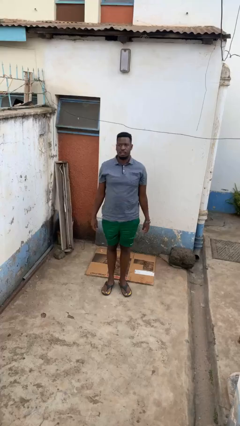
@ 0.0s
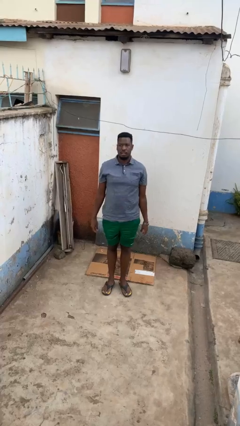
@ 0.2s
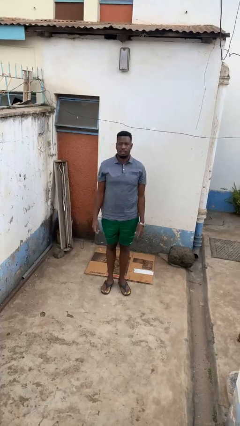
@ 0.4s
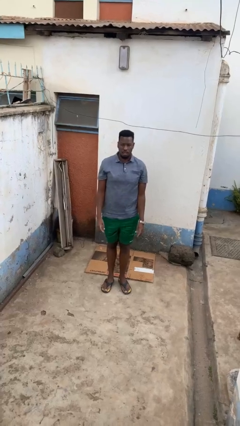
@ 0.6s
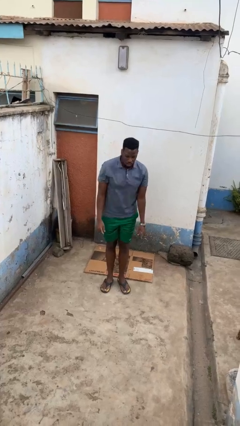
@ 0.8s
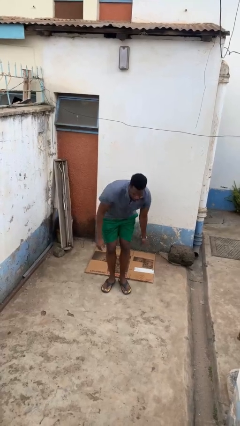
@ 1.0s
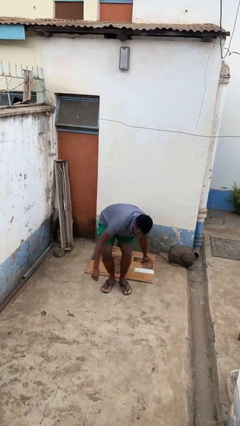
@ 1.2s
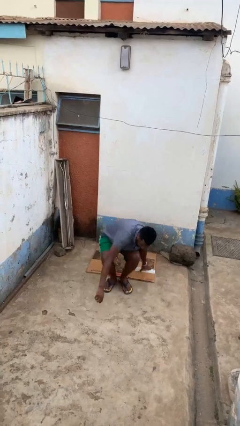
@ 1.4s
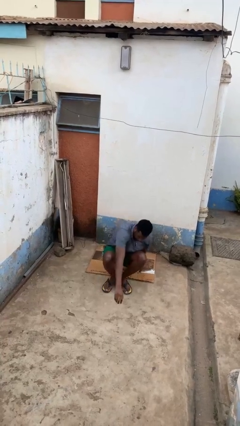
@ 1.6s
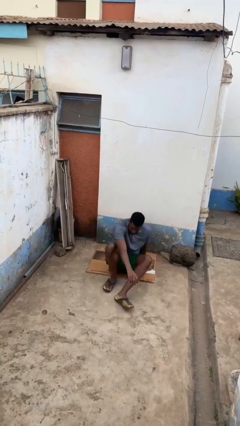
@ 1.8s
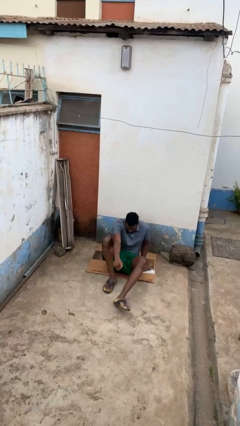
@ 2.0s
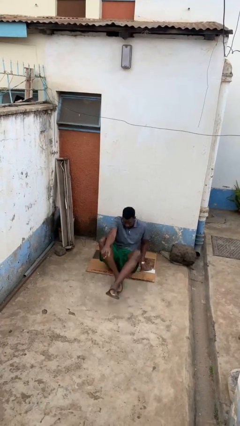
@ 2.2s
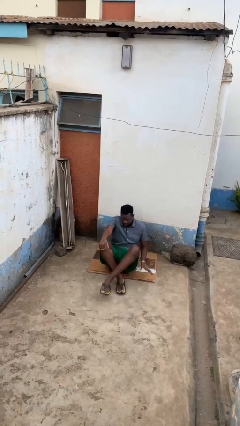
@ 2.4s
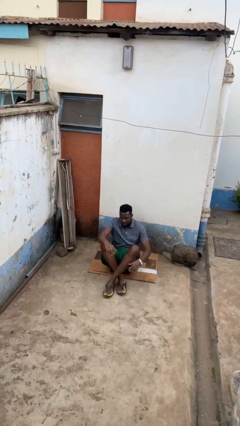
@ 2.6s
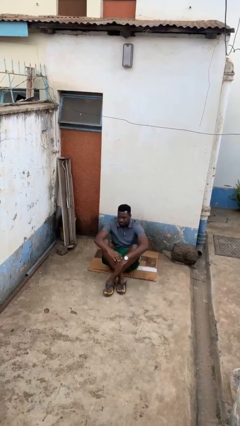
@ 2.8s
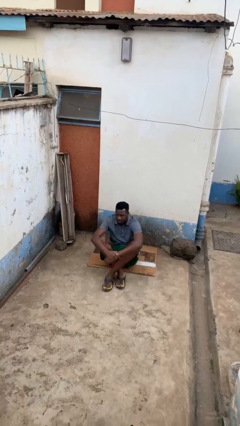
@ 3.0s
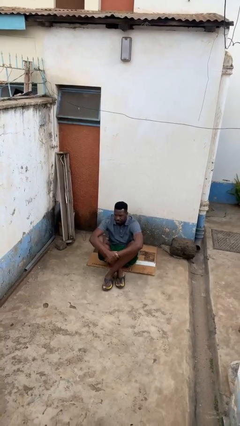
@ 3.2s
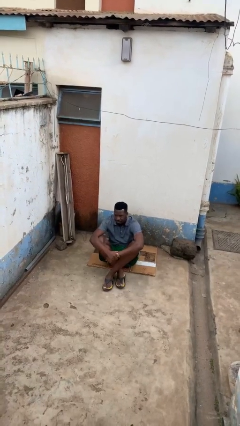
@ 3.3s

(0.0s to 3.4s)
person sits crisscross

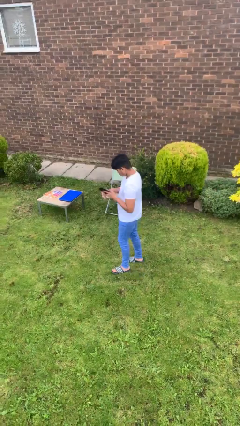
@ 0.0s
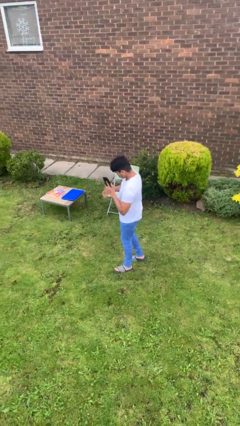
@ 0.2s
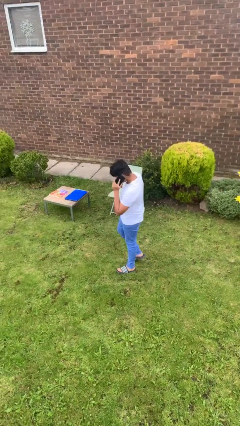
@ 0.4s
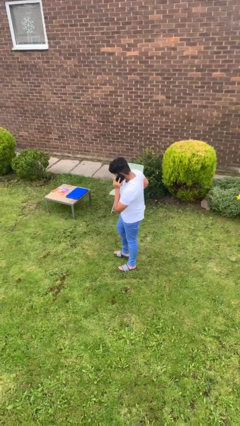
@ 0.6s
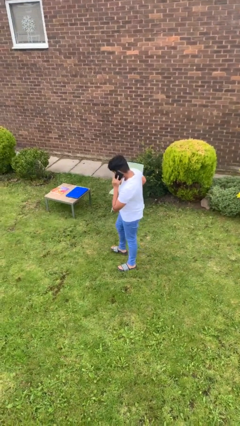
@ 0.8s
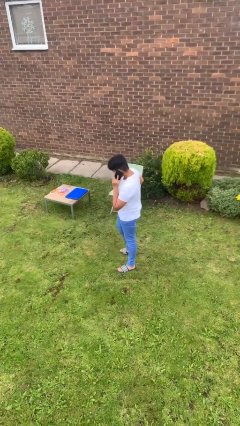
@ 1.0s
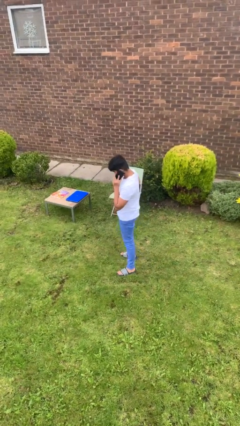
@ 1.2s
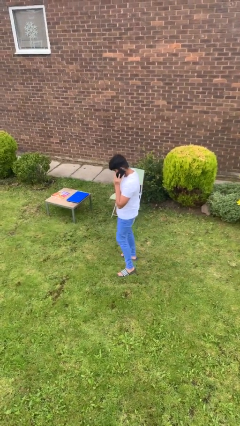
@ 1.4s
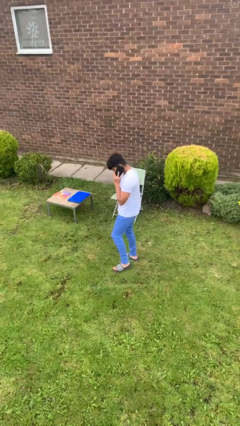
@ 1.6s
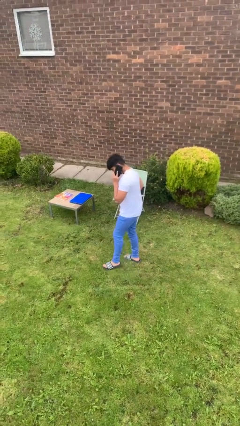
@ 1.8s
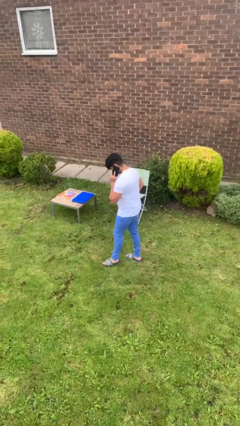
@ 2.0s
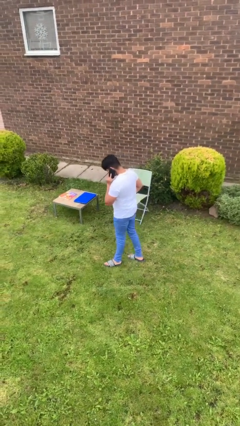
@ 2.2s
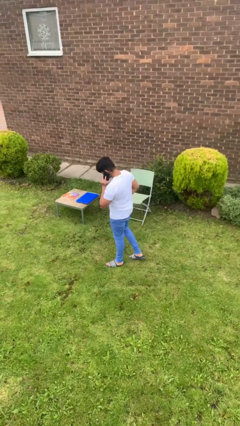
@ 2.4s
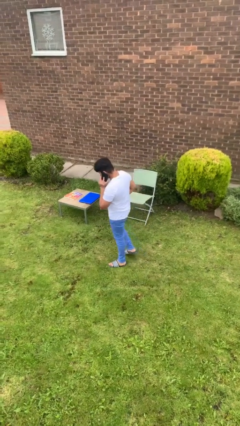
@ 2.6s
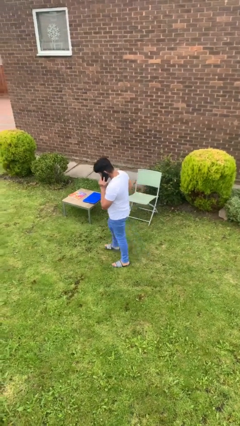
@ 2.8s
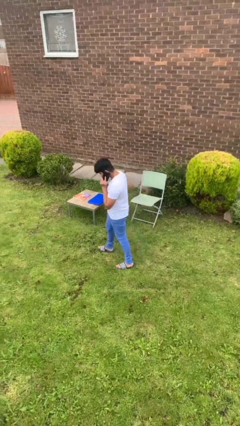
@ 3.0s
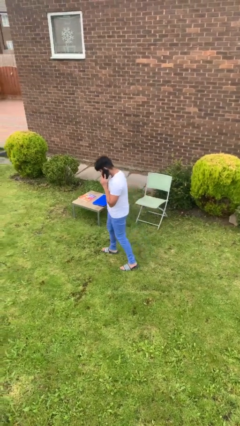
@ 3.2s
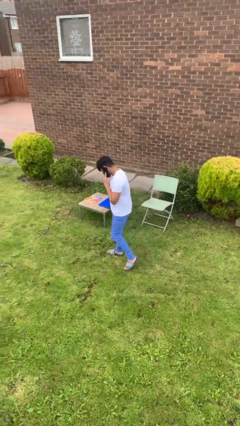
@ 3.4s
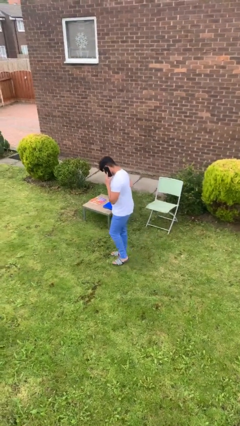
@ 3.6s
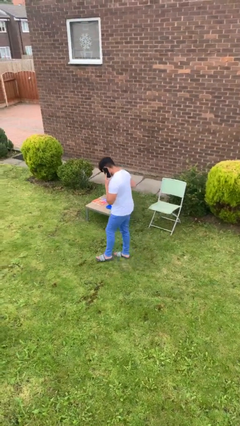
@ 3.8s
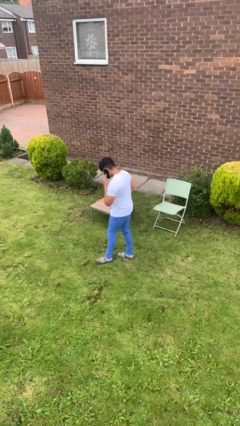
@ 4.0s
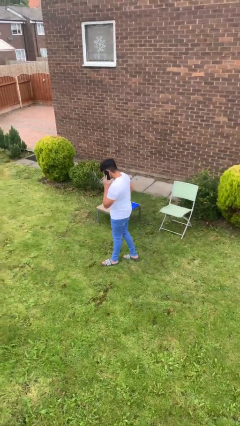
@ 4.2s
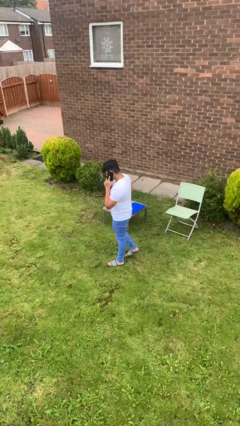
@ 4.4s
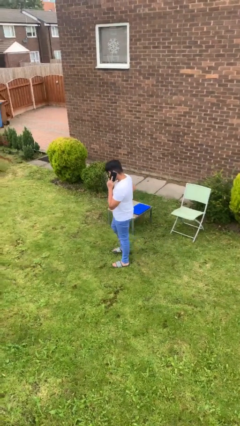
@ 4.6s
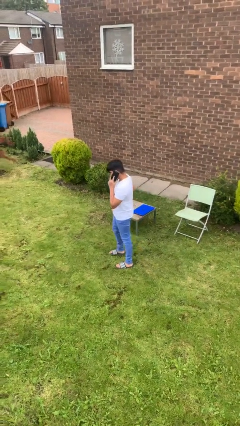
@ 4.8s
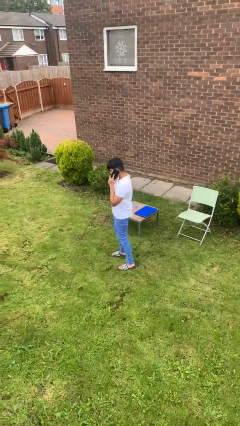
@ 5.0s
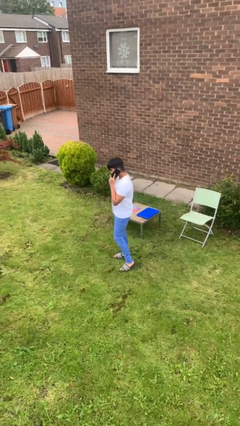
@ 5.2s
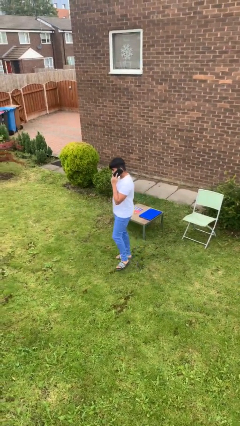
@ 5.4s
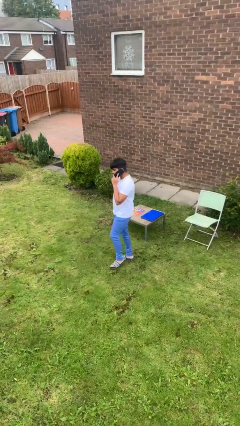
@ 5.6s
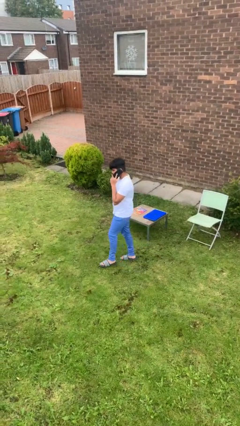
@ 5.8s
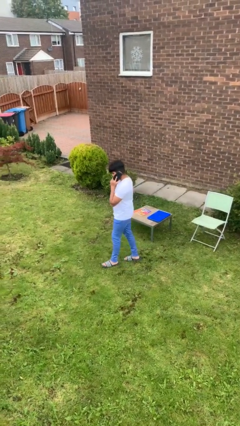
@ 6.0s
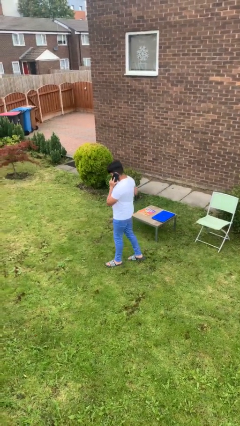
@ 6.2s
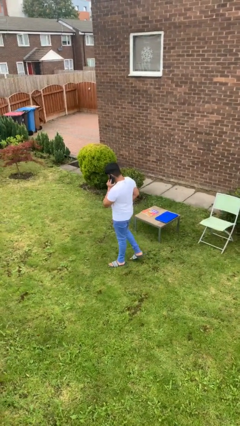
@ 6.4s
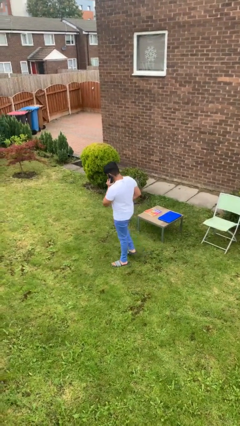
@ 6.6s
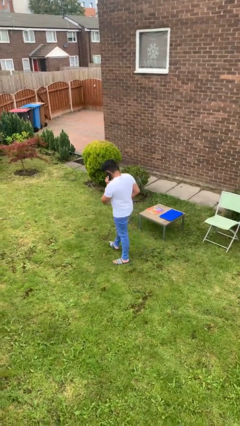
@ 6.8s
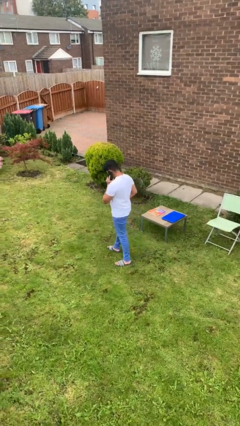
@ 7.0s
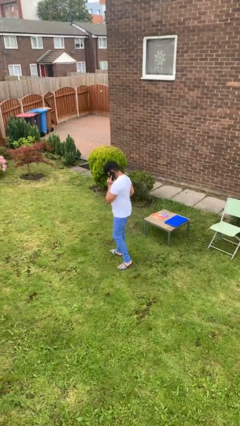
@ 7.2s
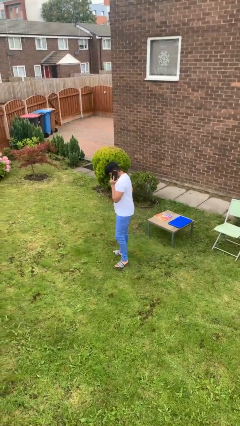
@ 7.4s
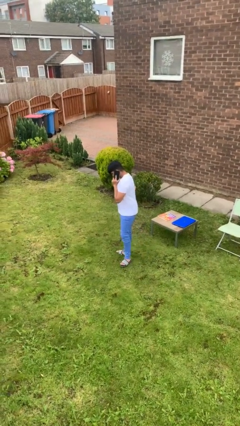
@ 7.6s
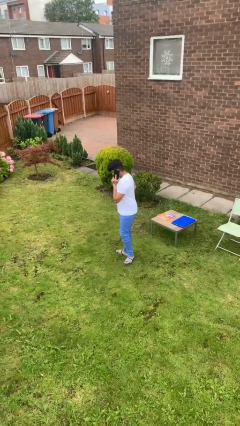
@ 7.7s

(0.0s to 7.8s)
person talks on phone

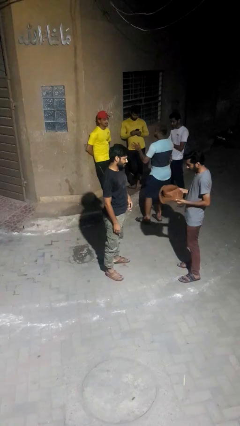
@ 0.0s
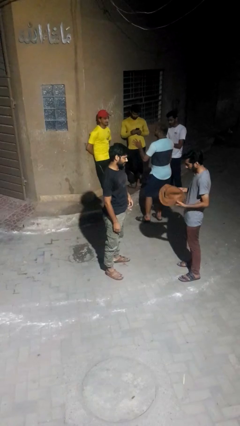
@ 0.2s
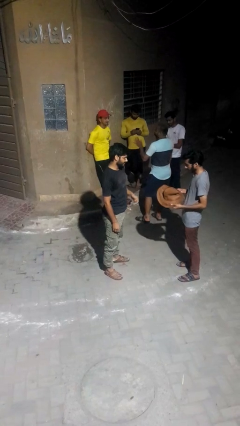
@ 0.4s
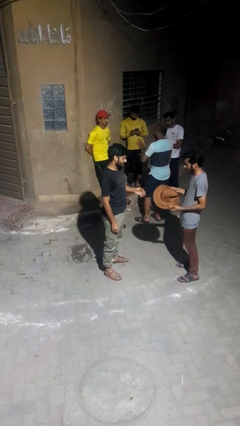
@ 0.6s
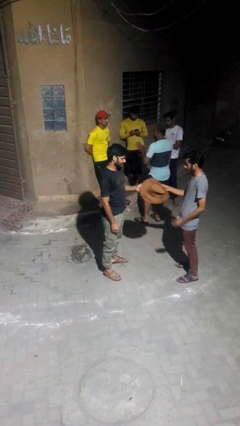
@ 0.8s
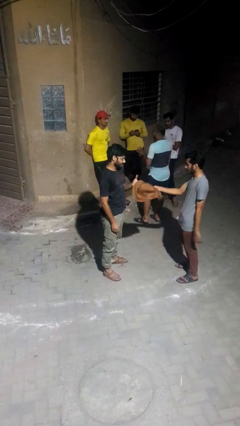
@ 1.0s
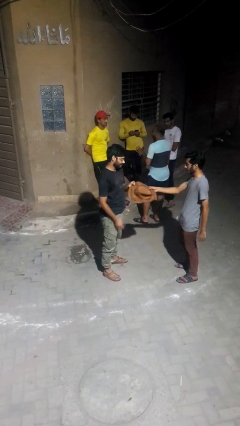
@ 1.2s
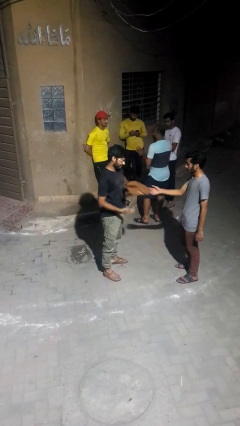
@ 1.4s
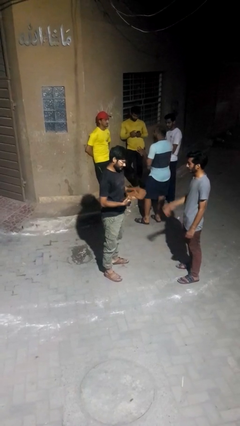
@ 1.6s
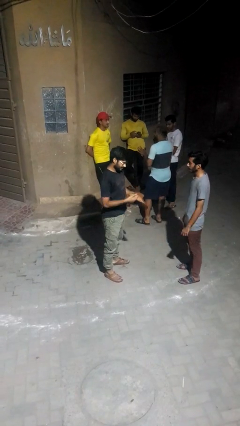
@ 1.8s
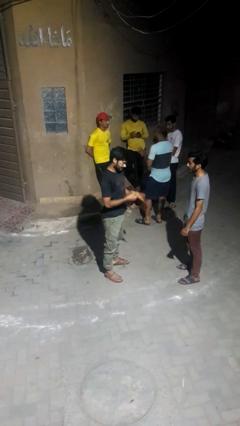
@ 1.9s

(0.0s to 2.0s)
person transfers object to person

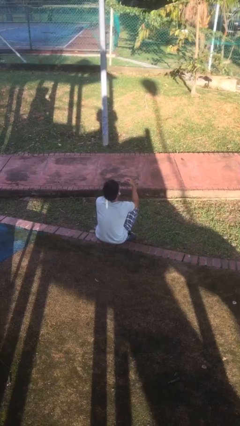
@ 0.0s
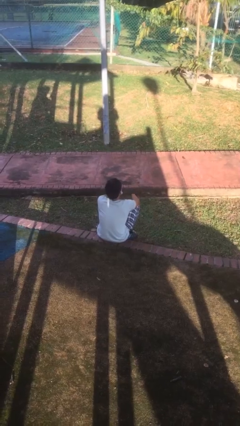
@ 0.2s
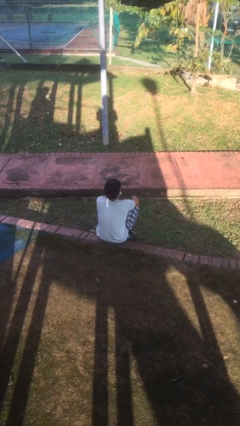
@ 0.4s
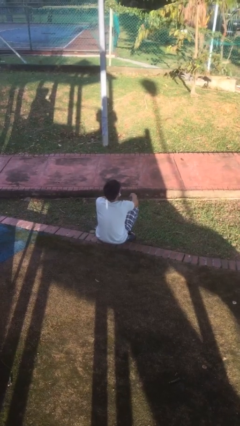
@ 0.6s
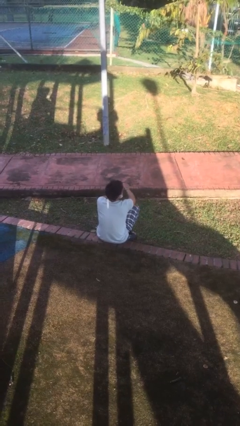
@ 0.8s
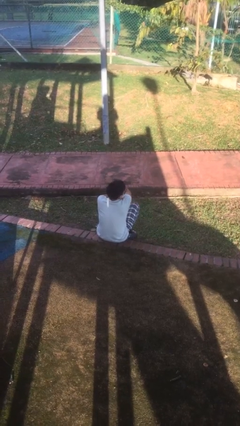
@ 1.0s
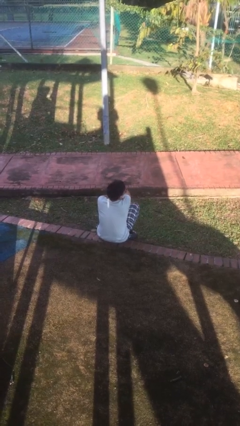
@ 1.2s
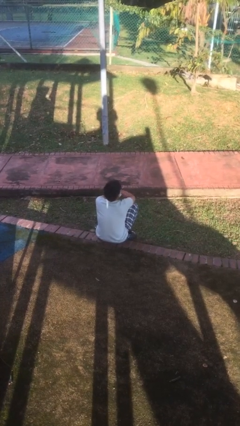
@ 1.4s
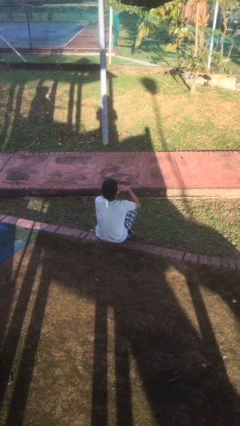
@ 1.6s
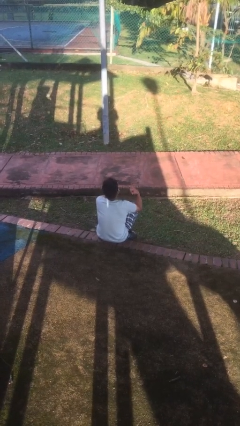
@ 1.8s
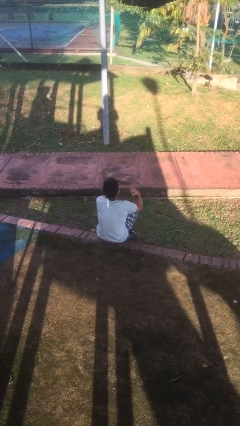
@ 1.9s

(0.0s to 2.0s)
person gestures cut

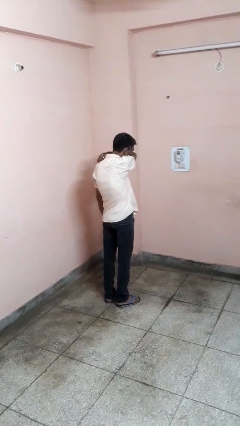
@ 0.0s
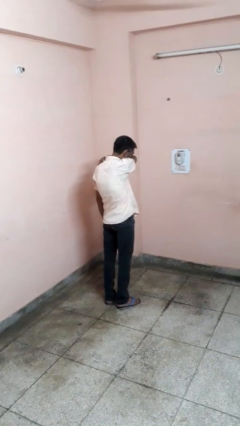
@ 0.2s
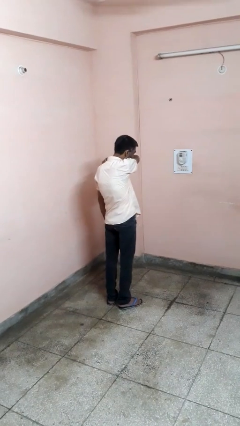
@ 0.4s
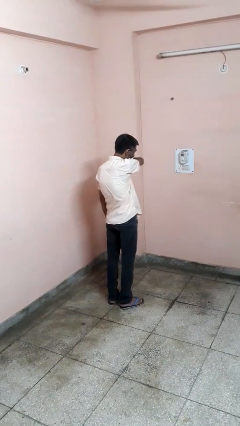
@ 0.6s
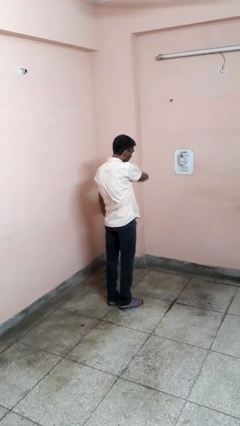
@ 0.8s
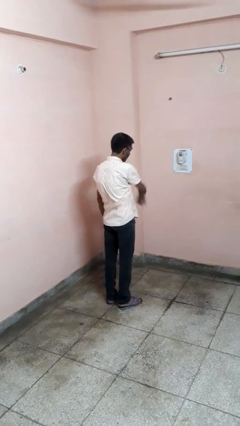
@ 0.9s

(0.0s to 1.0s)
person sneezes into arm

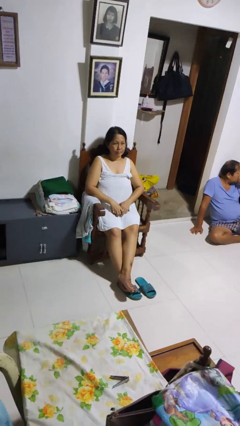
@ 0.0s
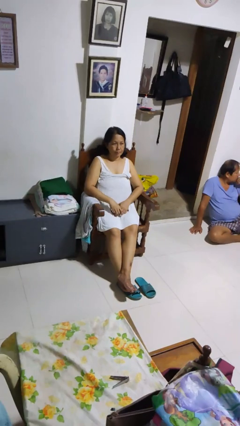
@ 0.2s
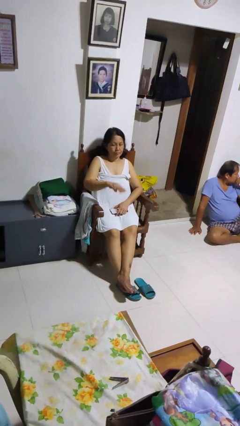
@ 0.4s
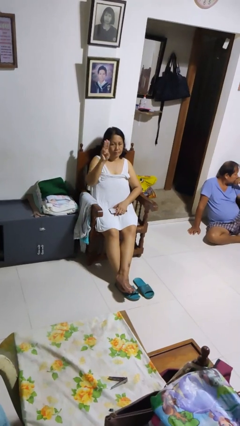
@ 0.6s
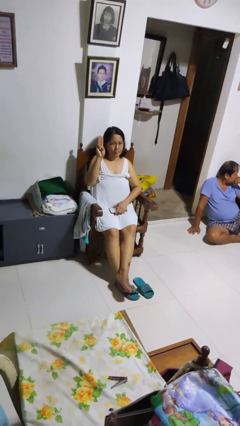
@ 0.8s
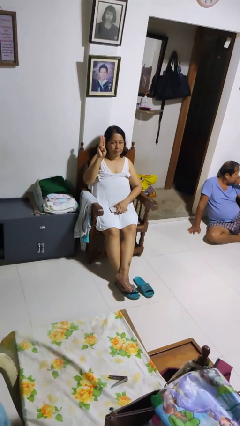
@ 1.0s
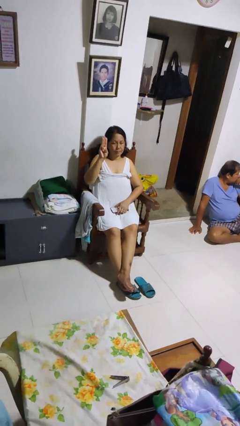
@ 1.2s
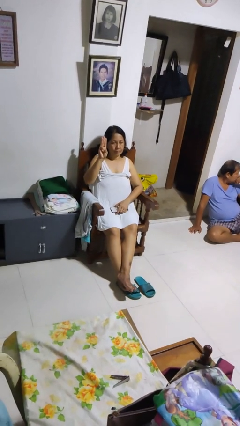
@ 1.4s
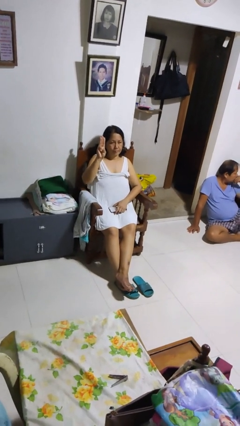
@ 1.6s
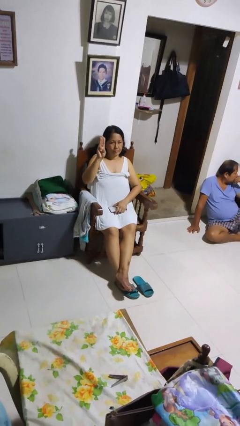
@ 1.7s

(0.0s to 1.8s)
person gestures number three
